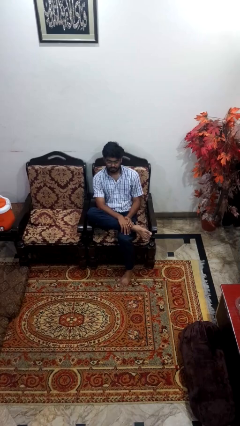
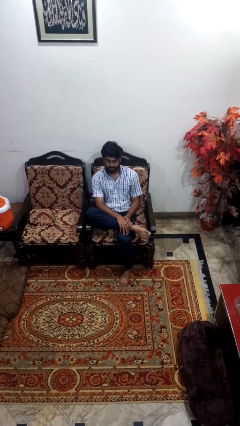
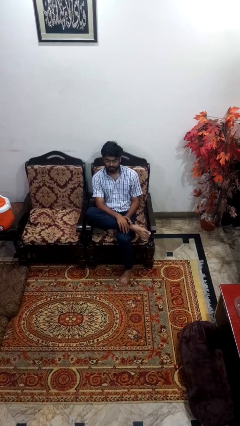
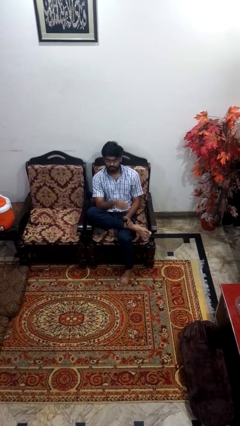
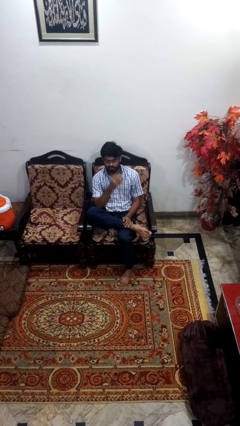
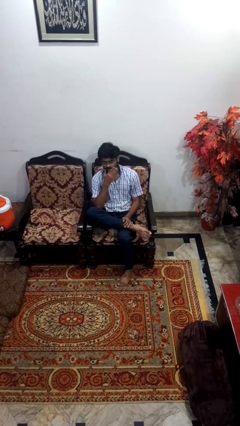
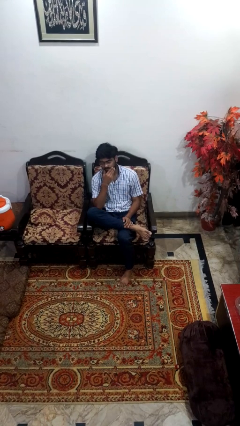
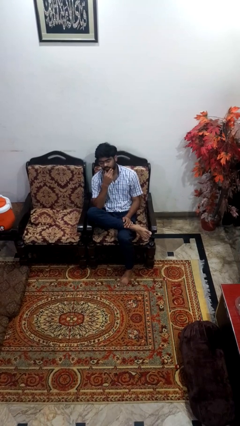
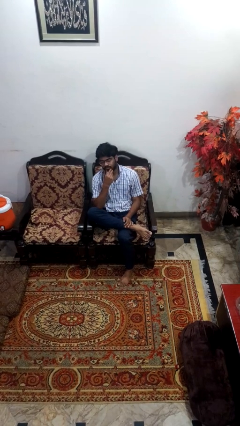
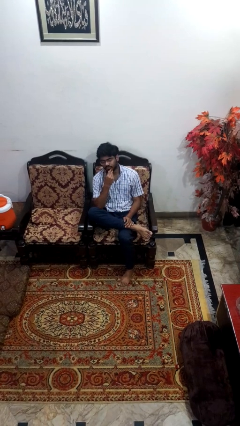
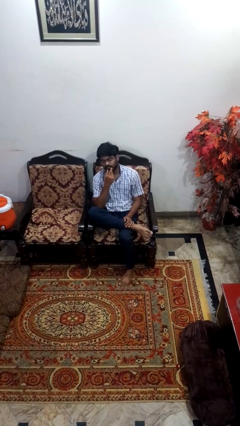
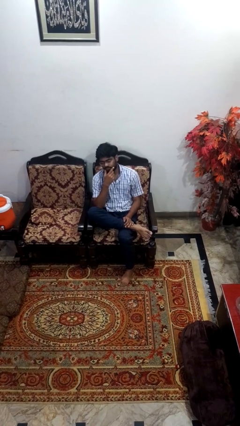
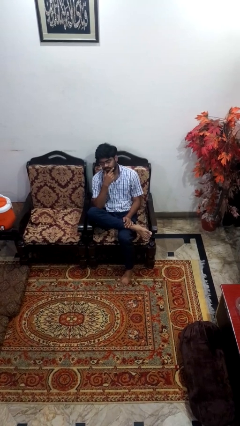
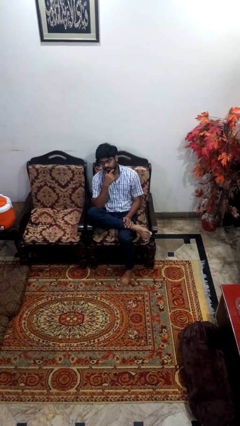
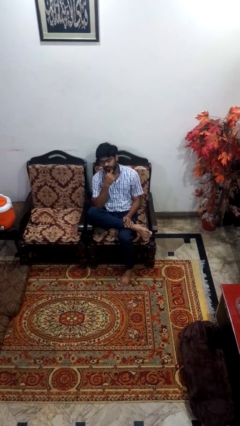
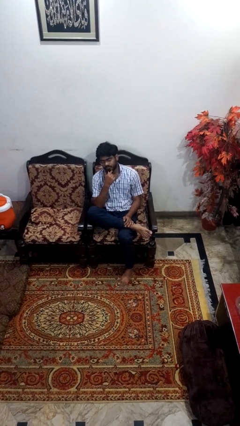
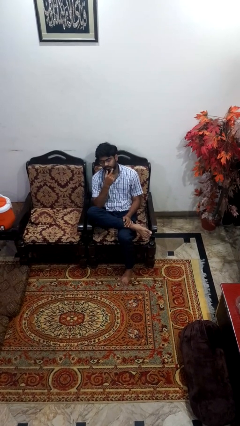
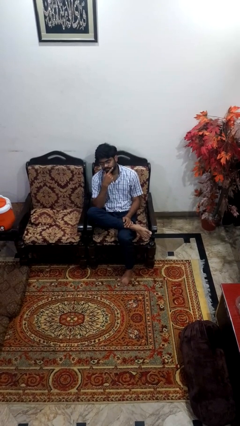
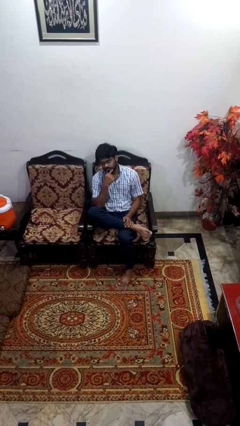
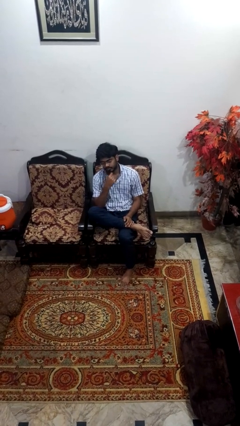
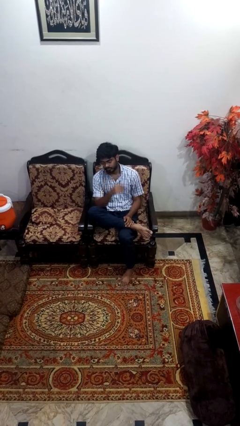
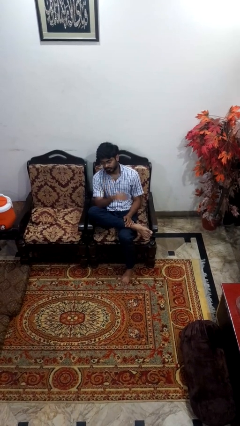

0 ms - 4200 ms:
person strokes chin

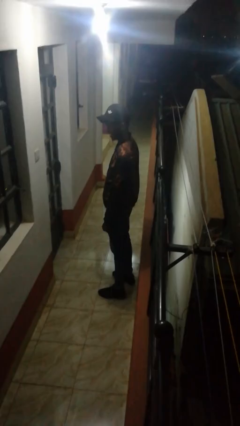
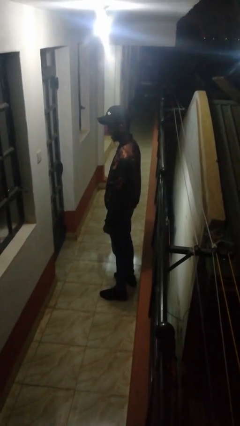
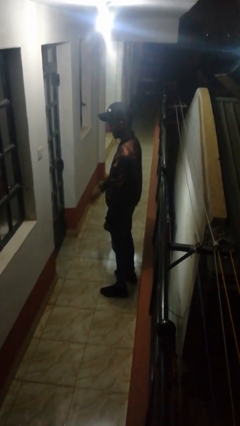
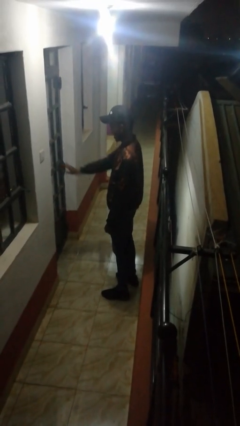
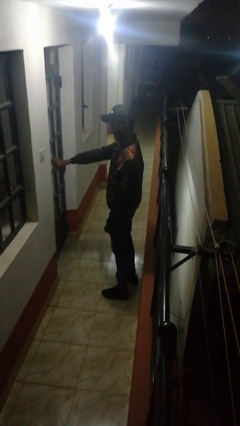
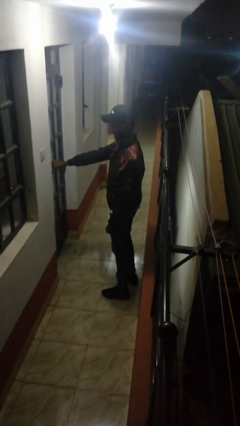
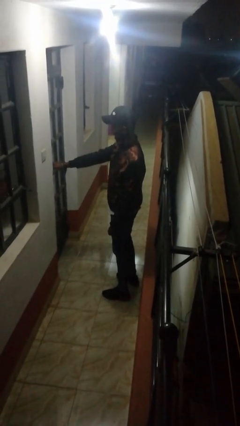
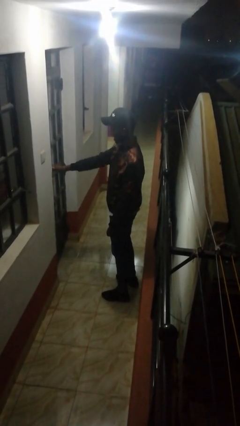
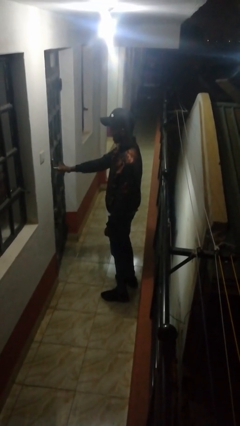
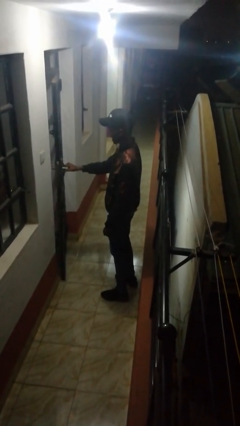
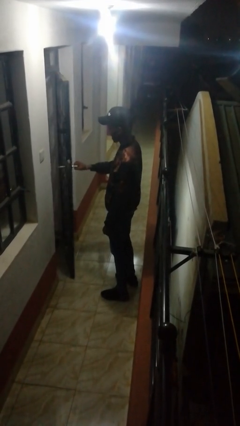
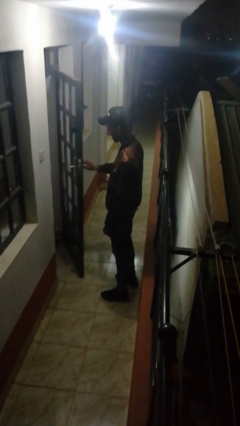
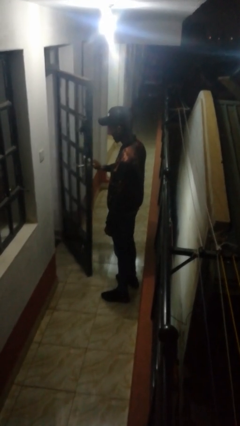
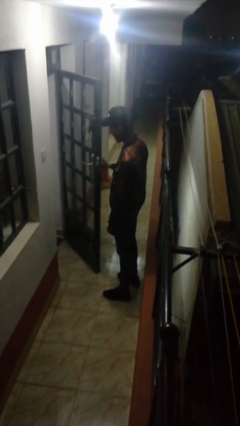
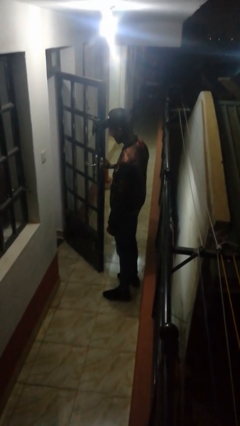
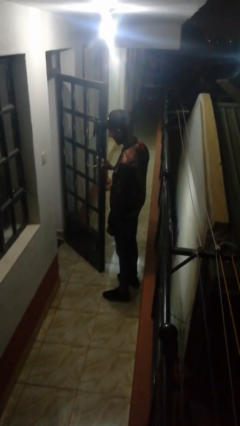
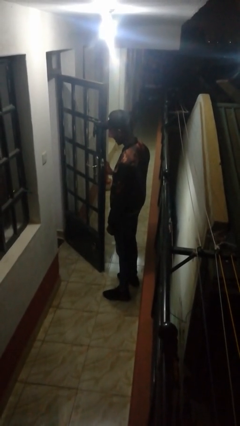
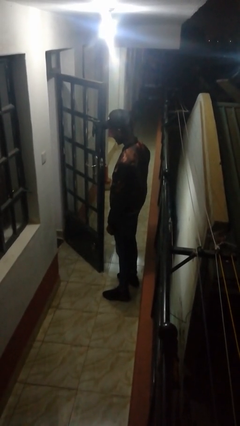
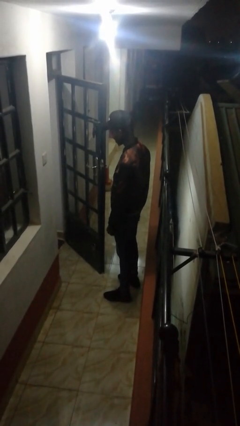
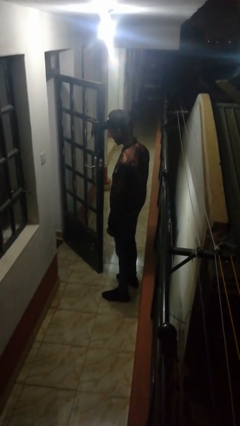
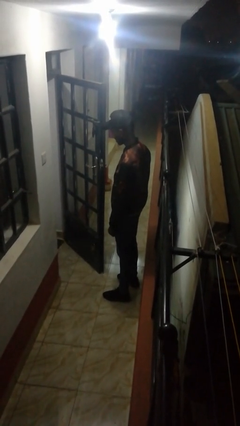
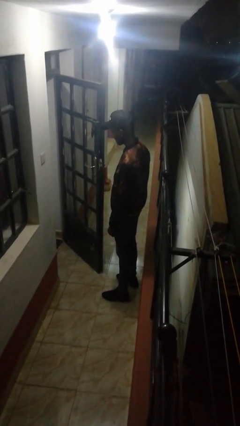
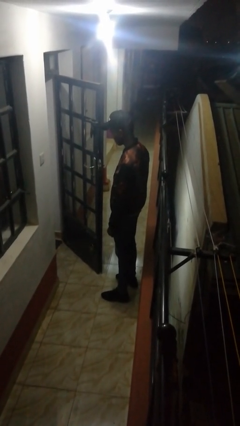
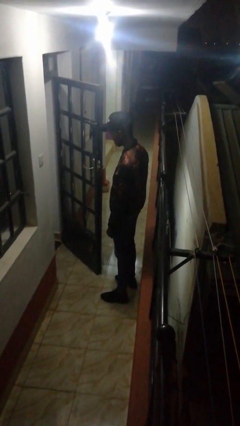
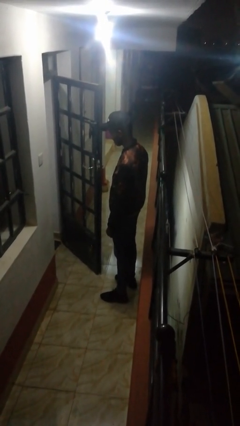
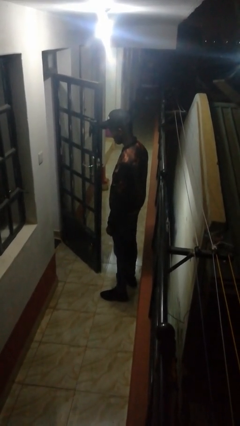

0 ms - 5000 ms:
person opens facility door

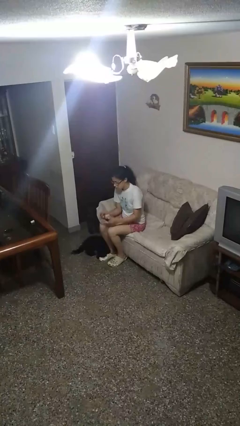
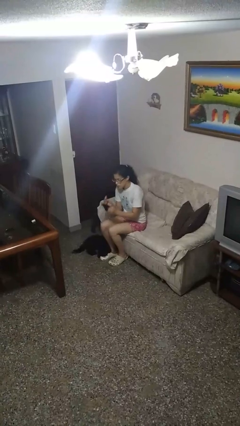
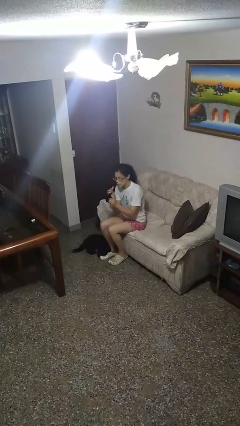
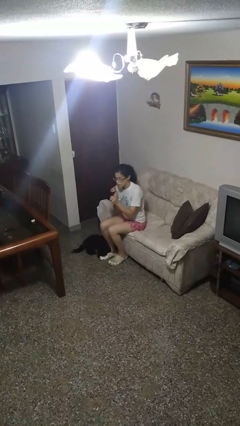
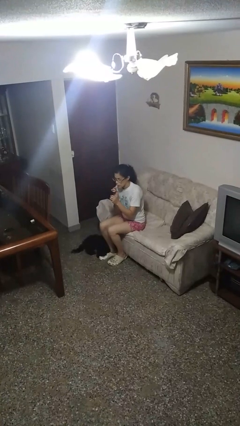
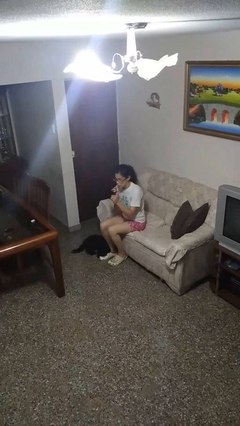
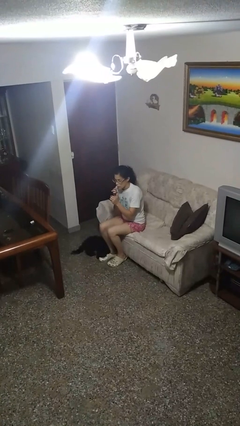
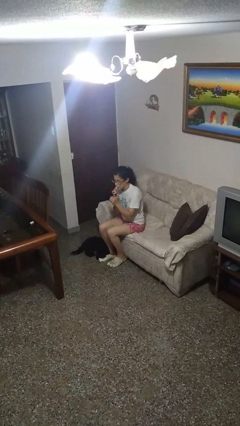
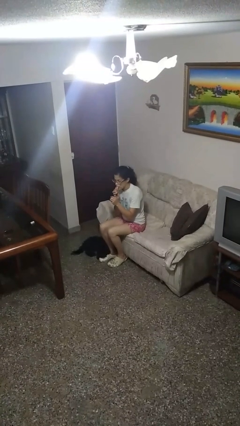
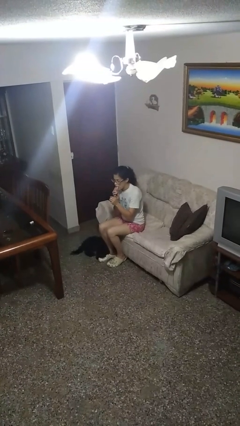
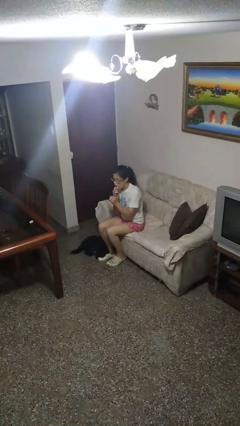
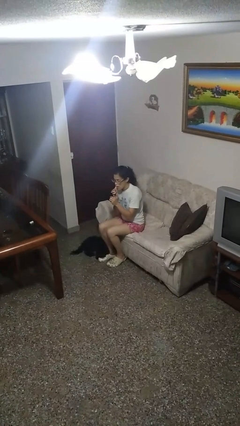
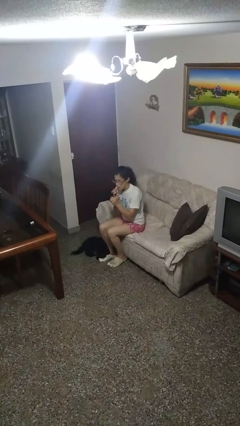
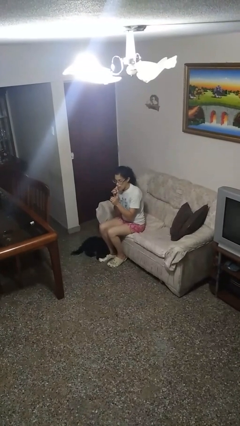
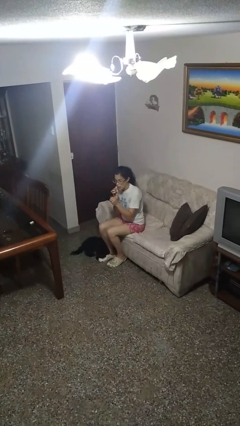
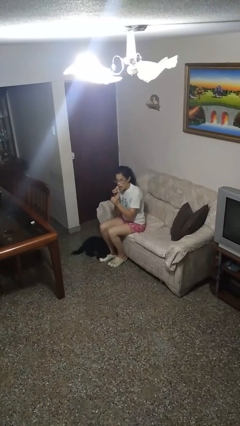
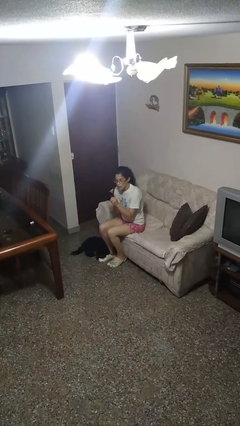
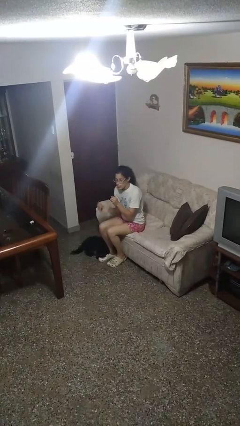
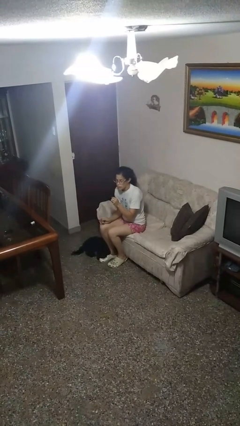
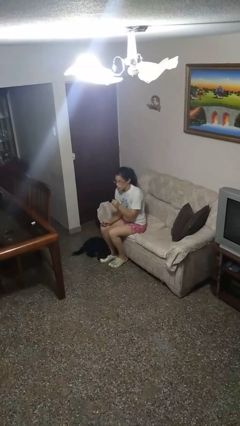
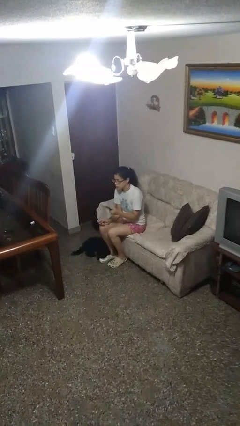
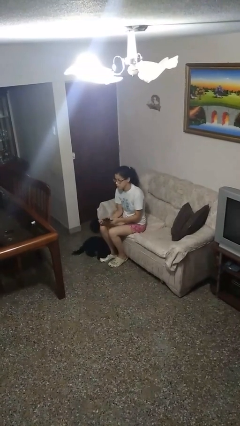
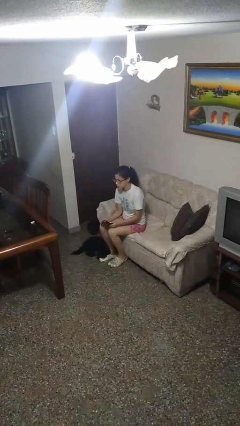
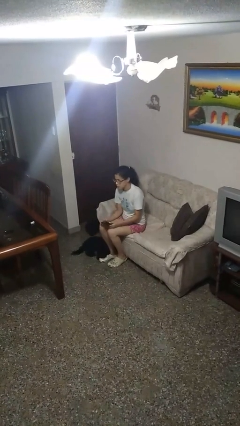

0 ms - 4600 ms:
person applies lip makeup

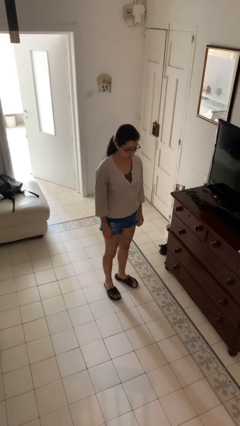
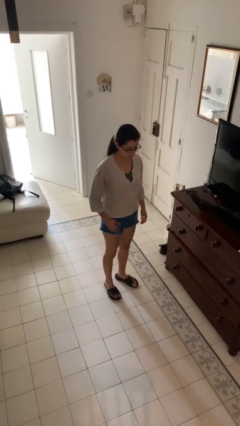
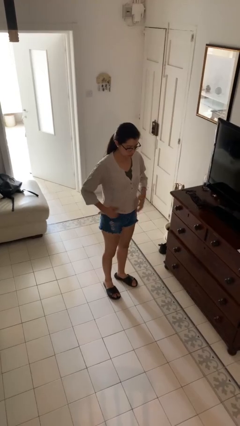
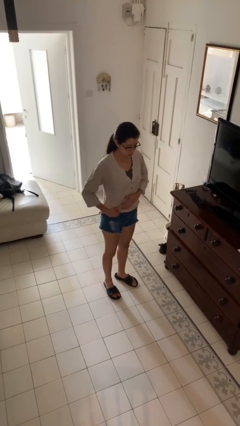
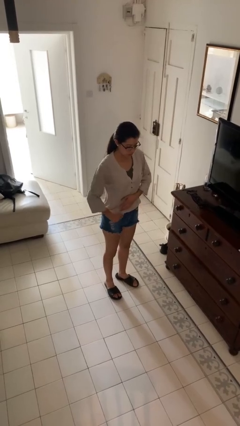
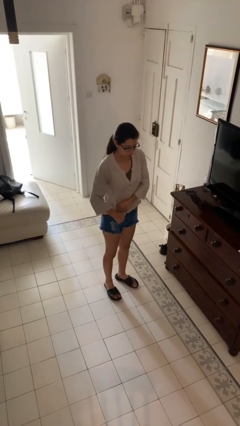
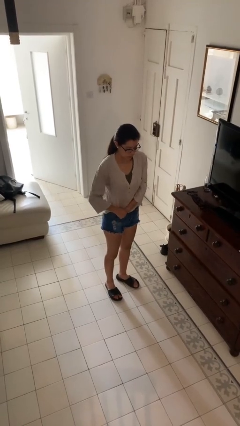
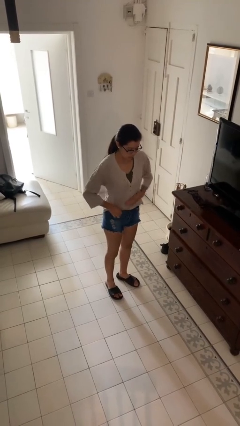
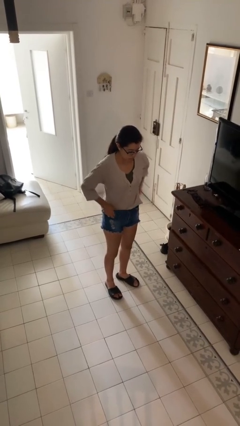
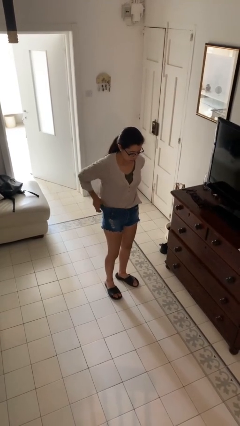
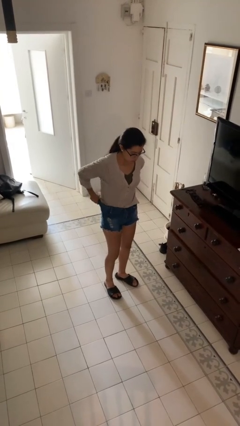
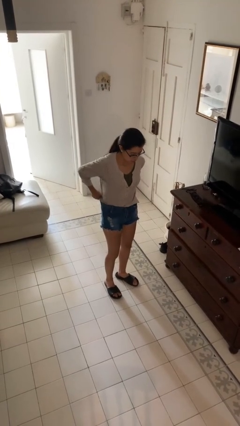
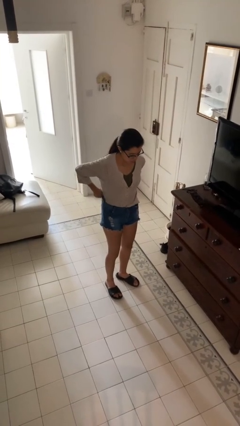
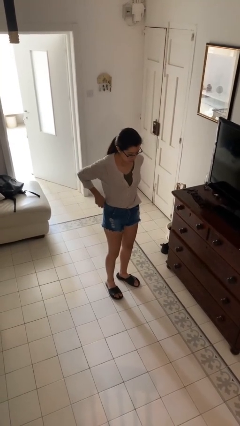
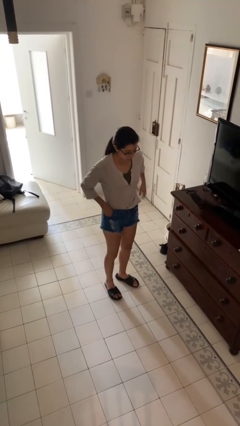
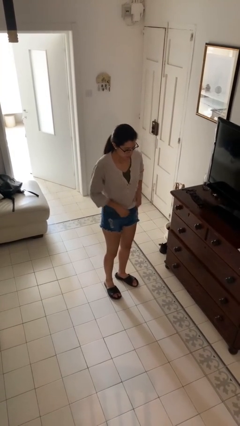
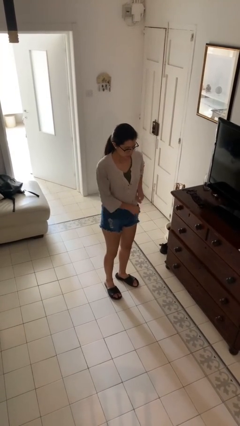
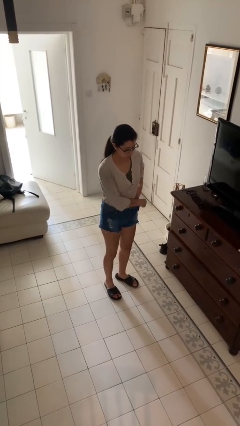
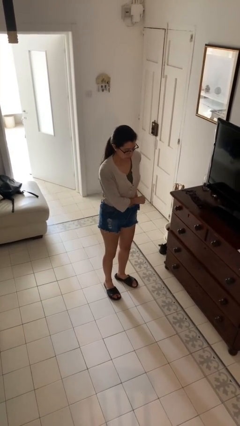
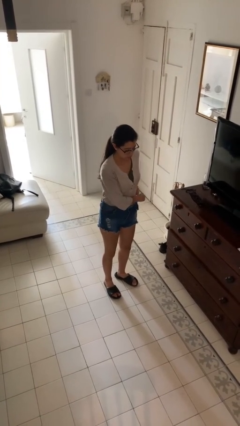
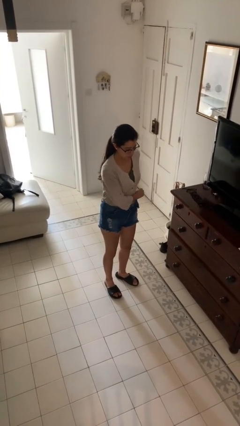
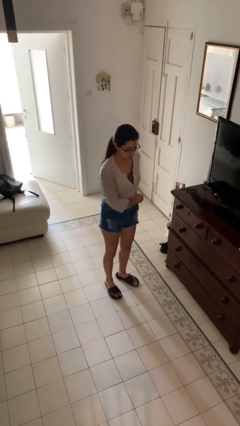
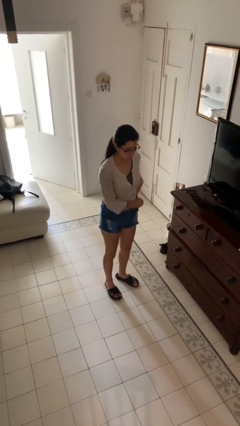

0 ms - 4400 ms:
person tucks in shirt
